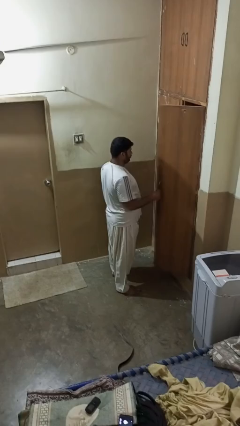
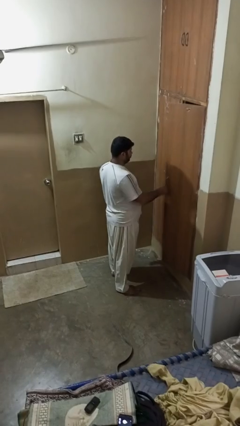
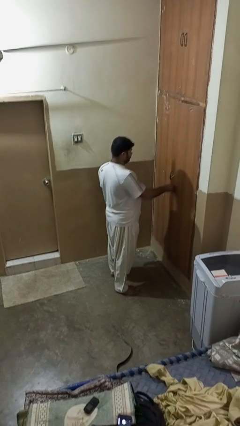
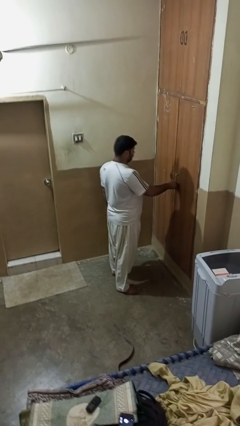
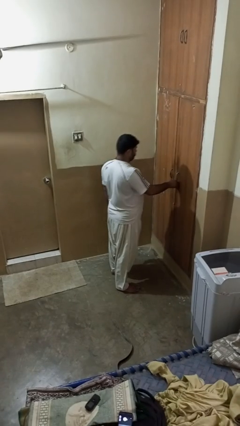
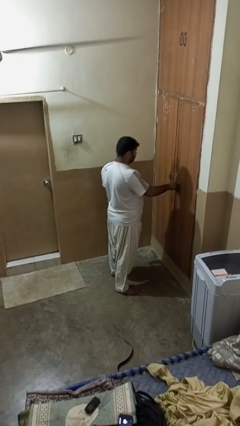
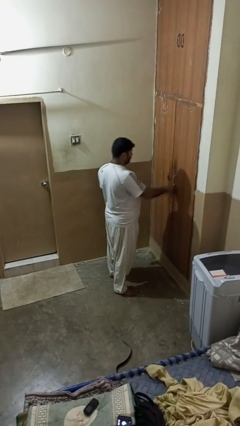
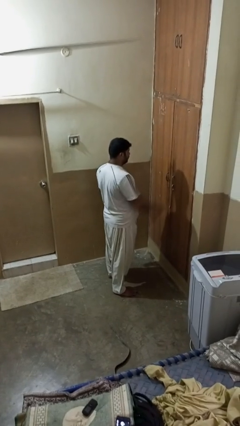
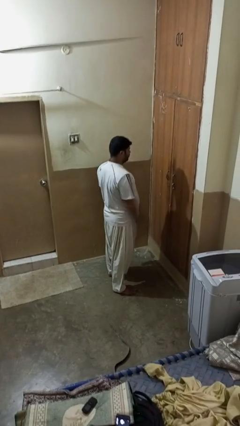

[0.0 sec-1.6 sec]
person closes closet door

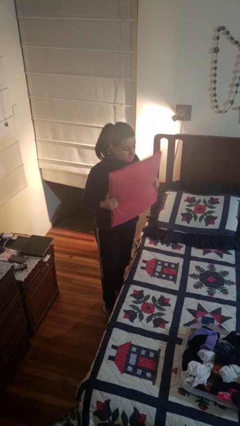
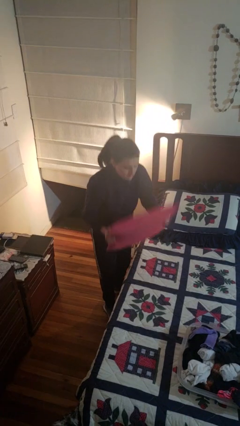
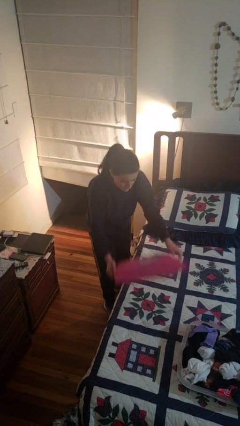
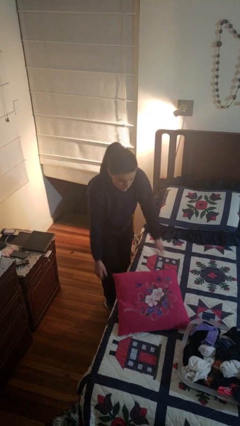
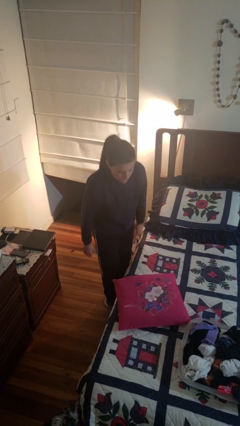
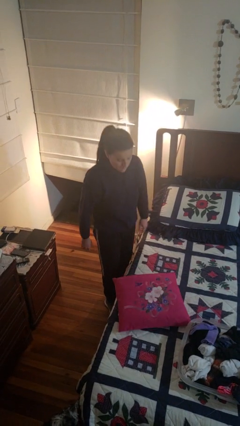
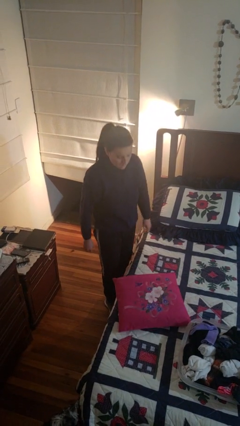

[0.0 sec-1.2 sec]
person puts down object on bed

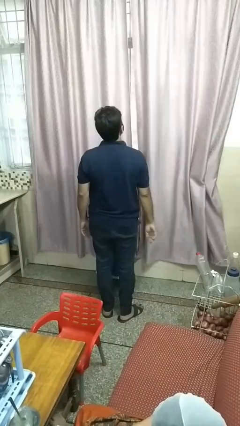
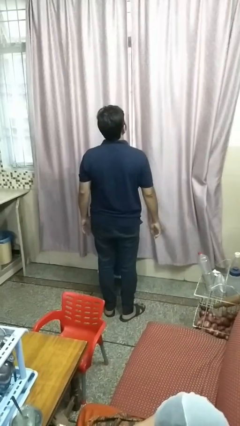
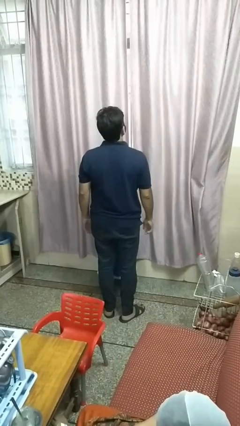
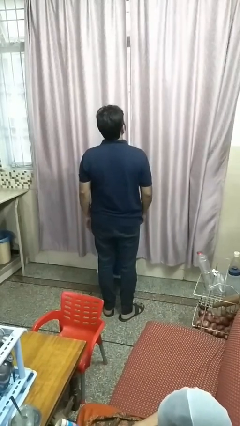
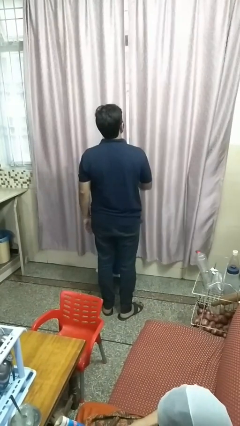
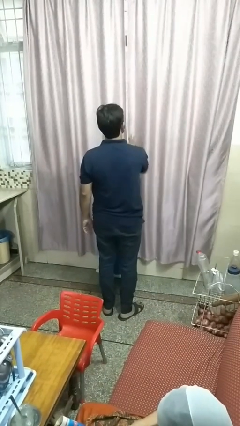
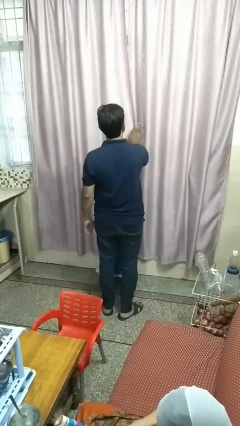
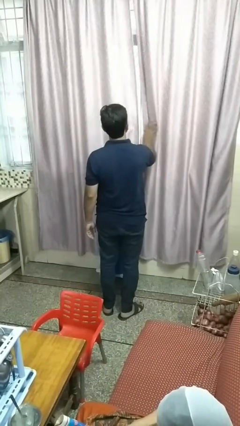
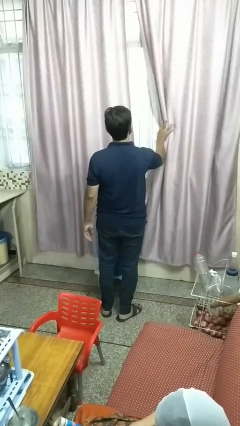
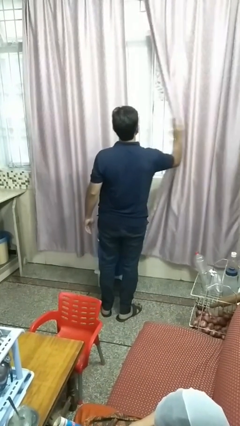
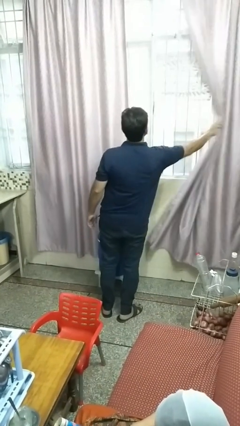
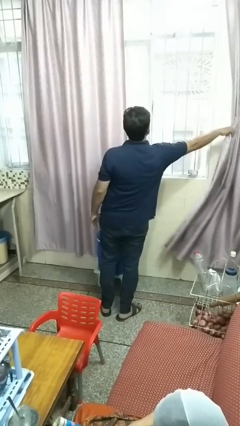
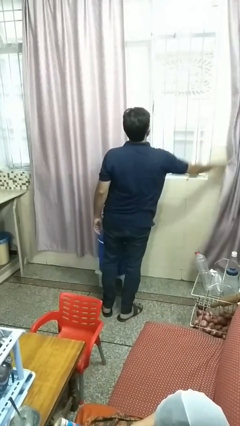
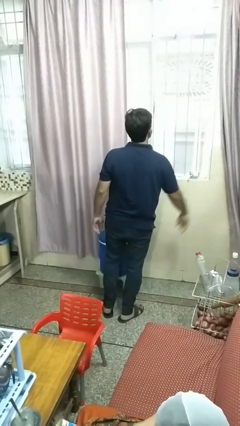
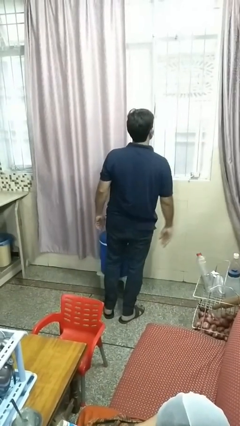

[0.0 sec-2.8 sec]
person opens curtains

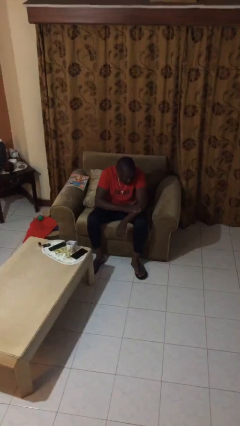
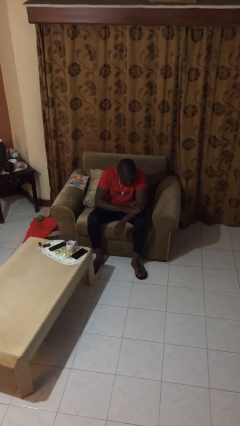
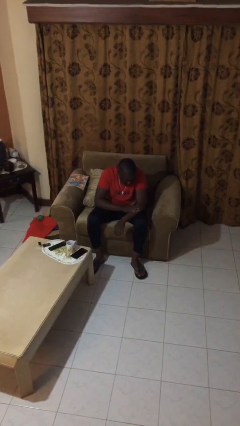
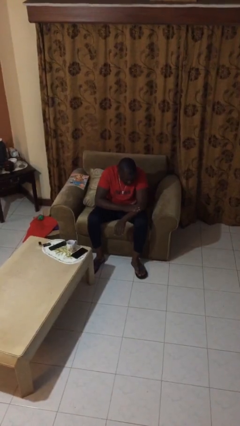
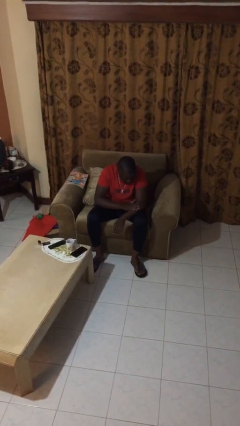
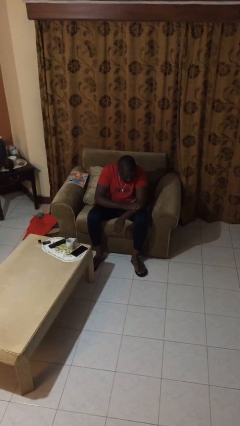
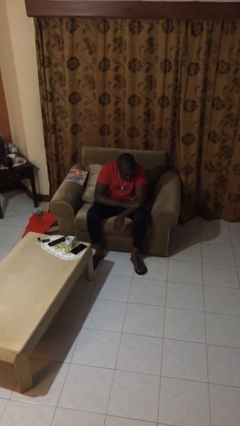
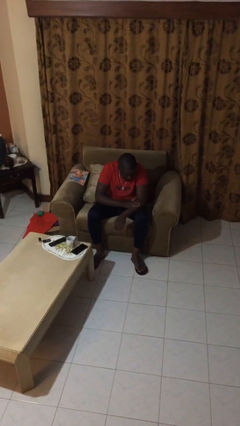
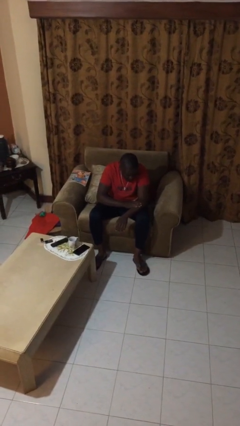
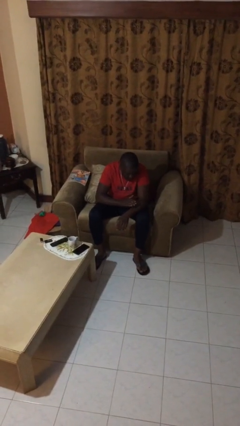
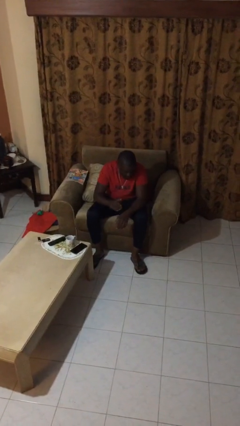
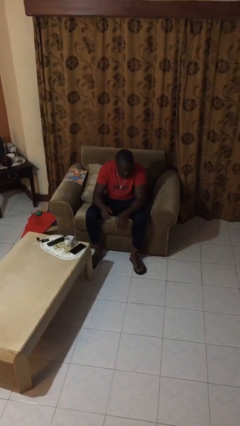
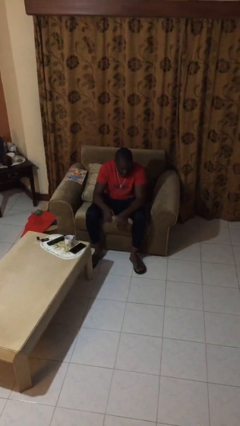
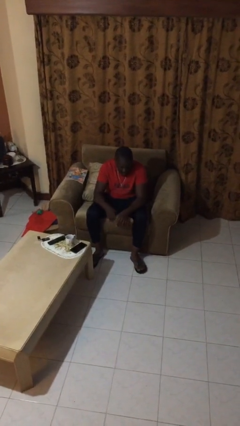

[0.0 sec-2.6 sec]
person swats bug

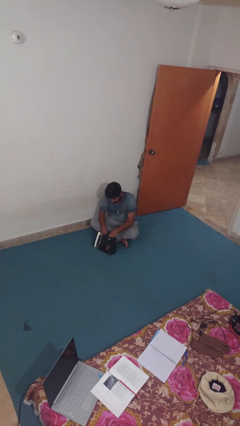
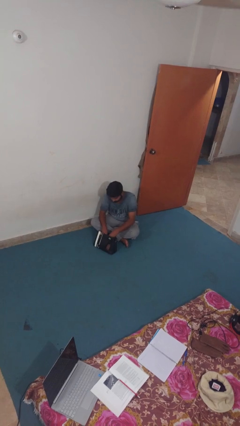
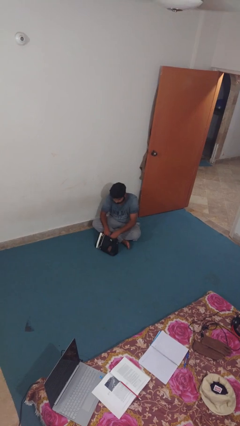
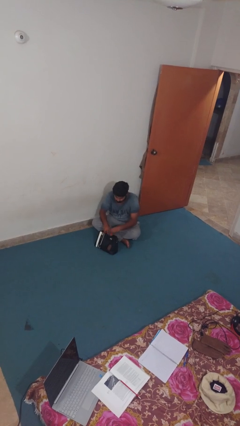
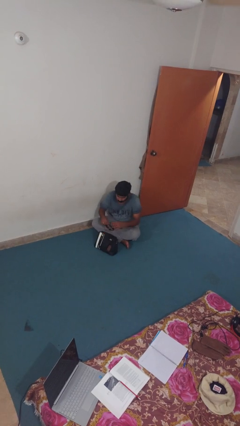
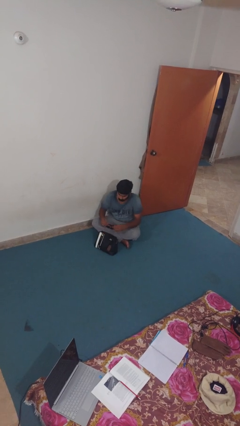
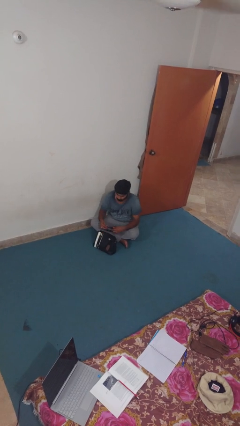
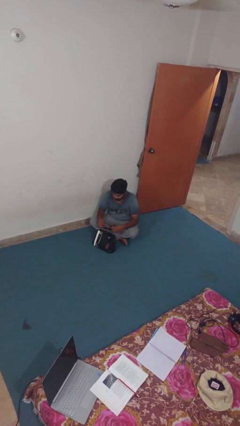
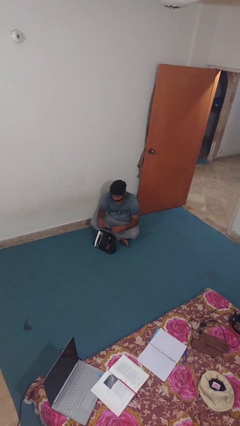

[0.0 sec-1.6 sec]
person takes object from purse

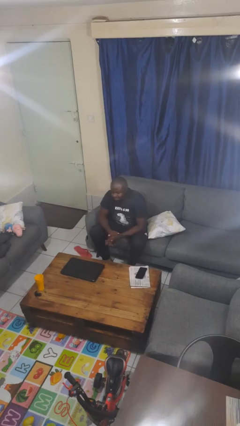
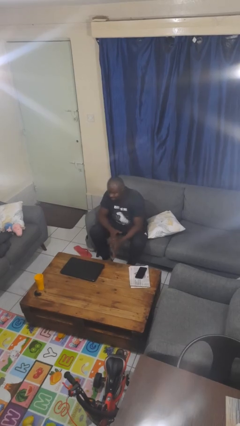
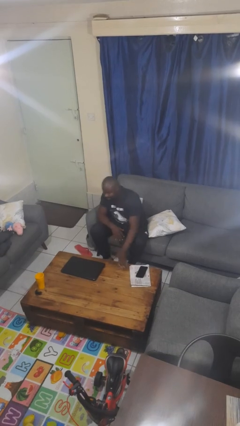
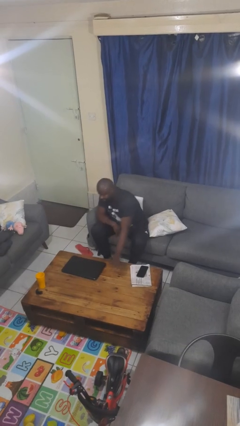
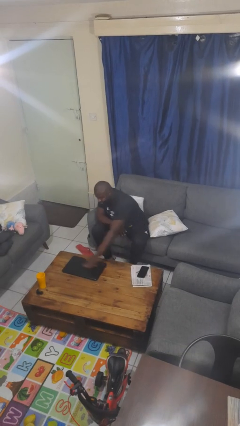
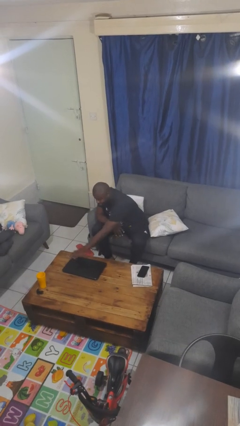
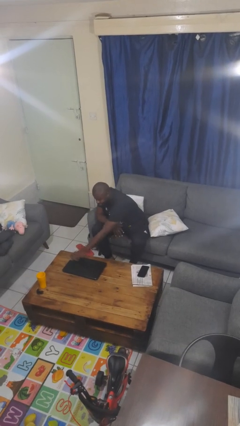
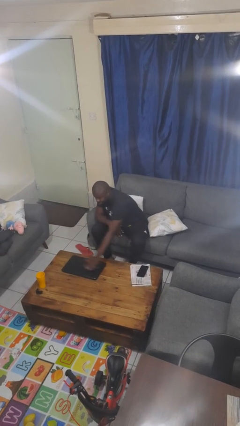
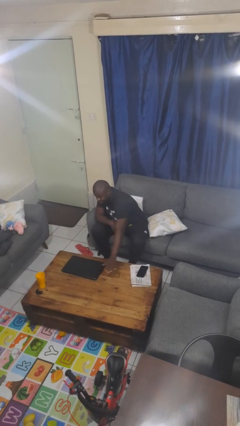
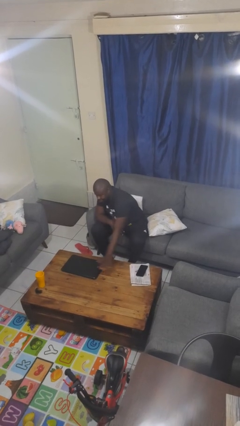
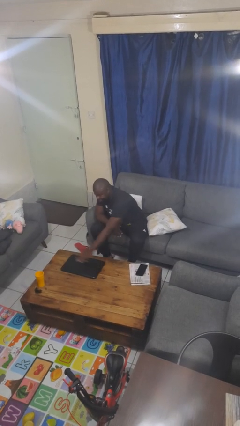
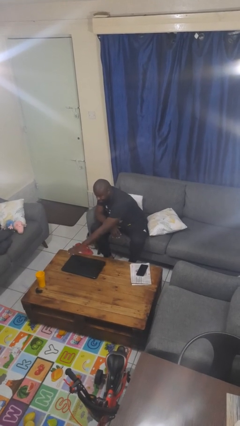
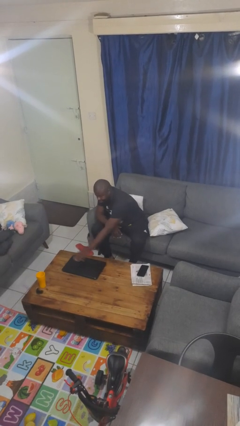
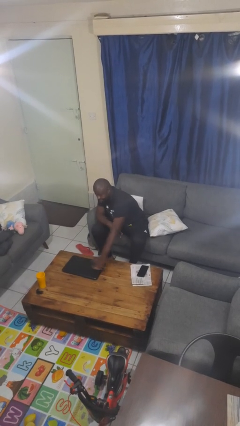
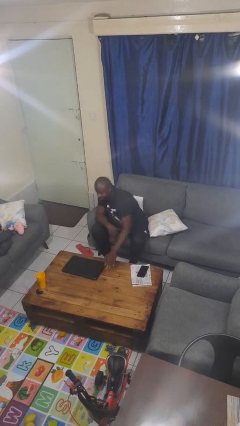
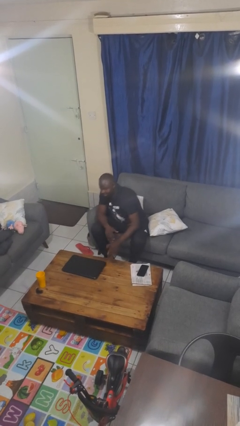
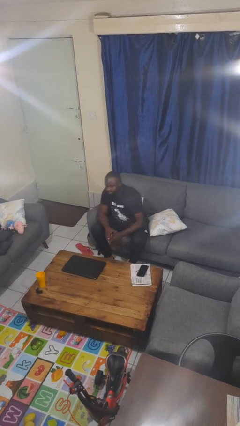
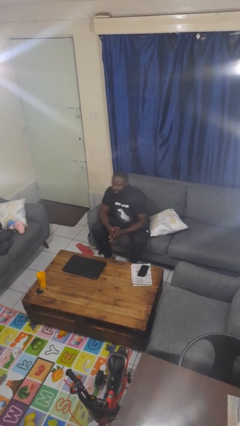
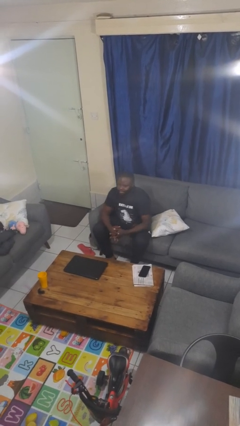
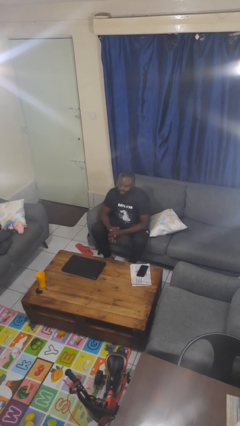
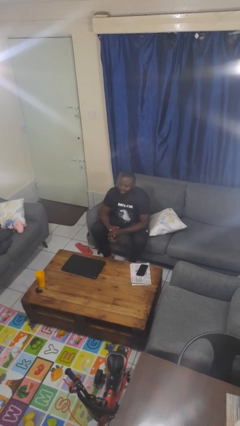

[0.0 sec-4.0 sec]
person waves hand over object

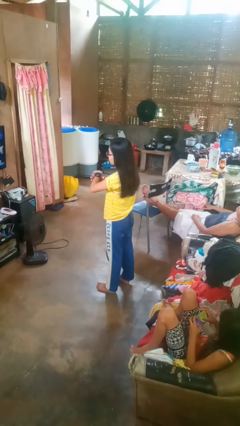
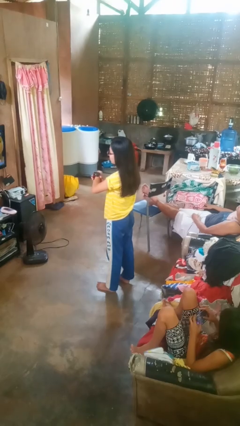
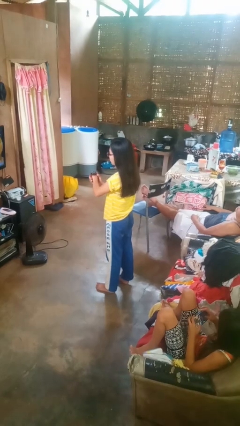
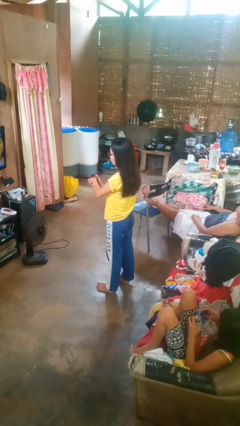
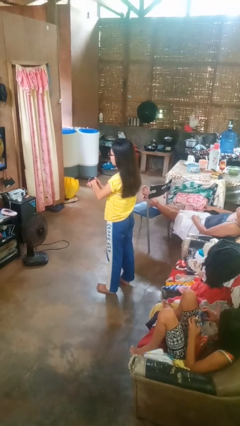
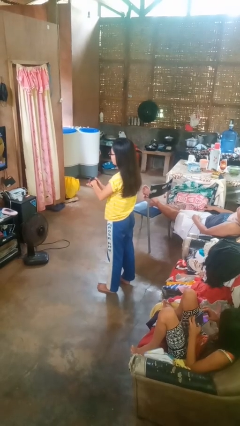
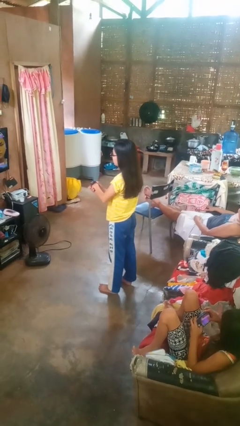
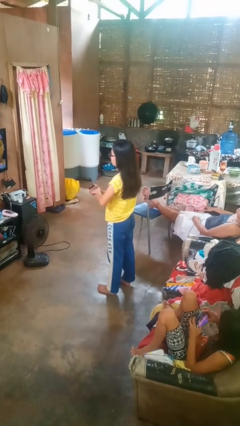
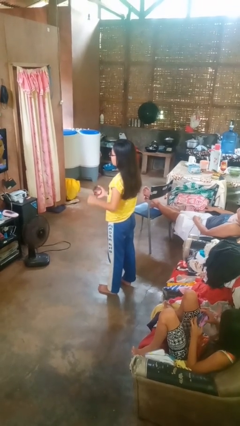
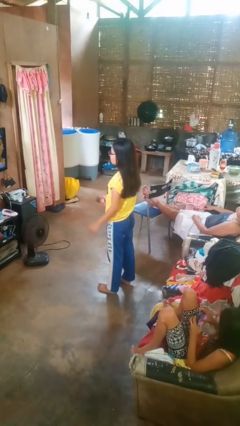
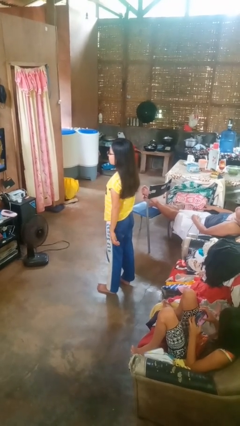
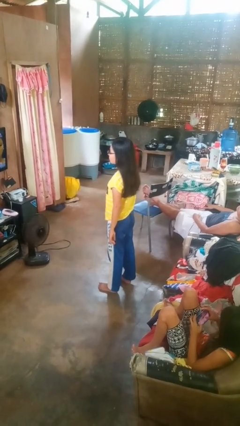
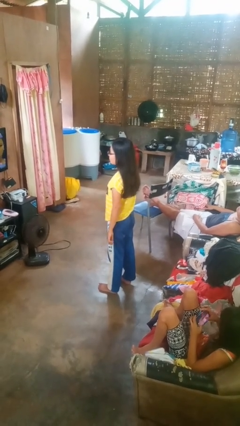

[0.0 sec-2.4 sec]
person takes off wristwatch

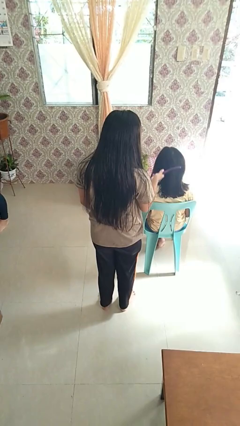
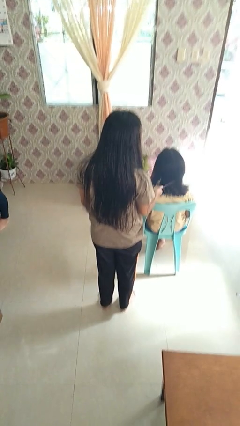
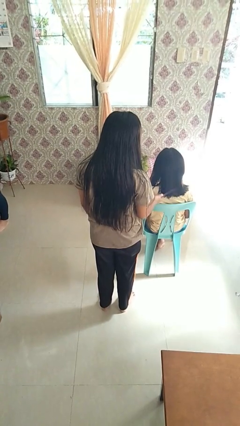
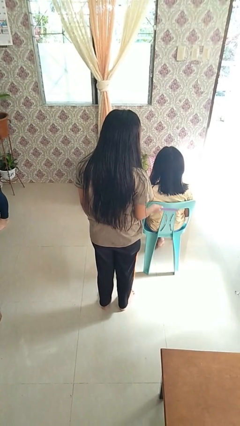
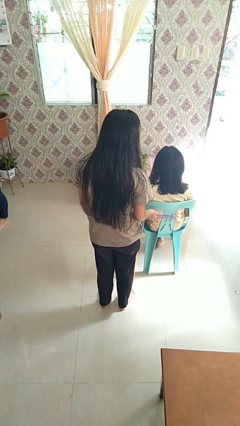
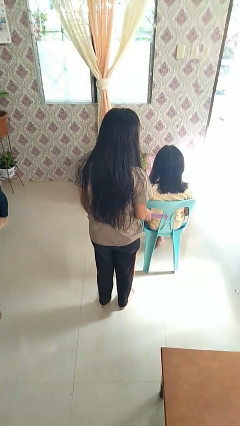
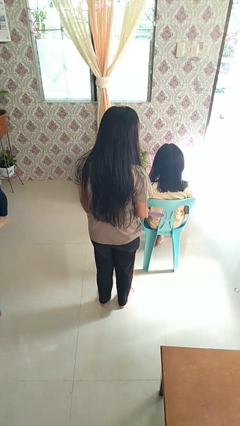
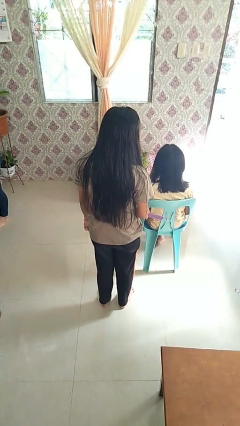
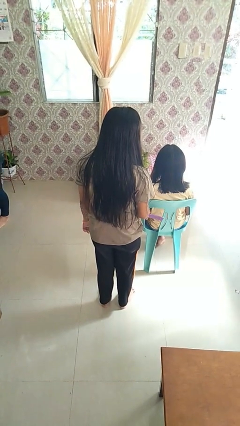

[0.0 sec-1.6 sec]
person brushes hair of person
